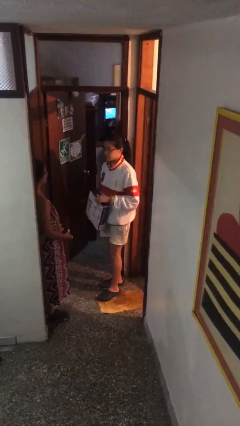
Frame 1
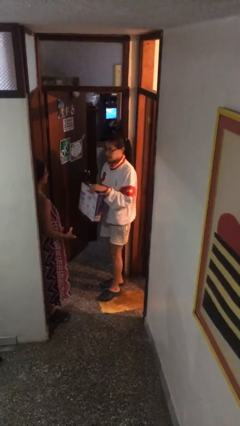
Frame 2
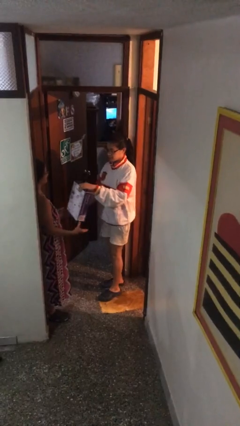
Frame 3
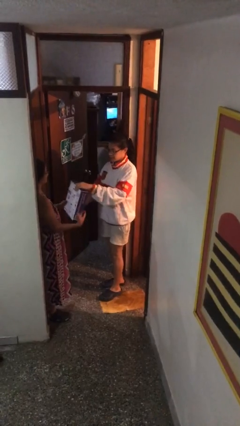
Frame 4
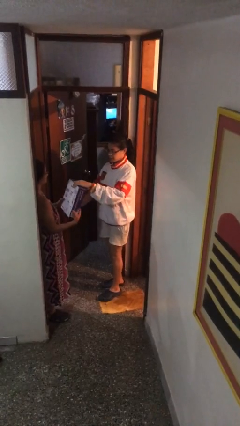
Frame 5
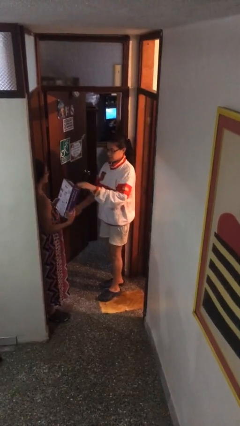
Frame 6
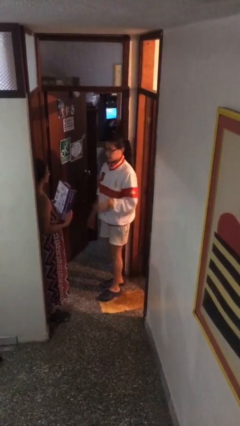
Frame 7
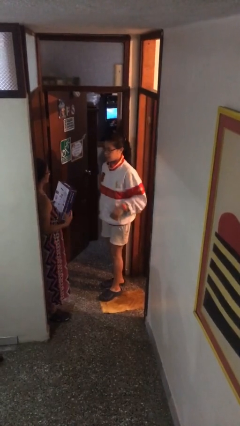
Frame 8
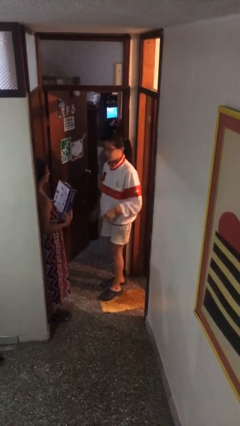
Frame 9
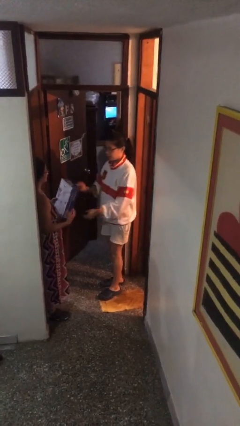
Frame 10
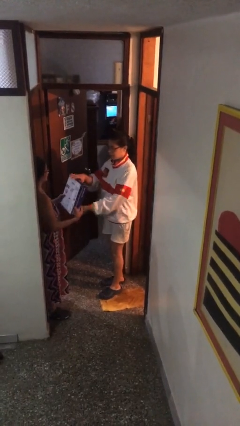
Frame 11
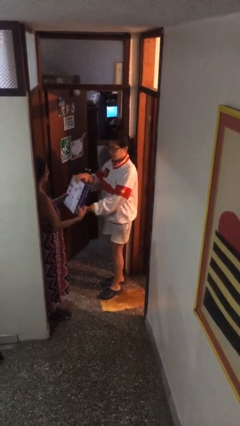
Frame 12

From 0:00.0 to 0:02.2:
person transfers object to person

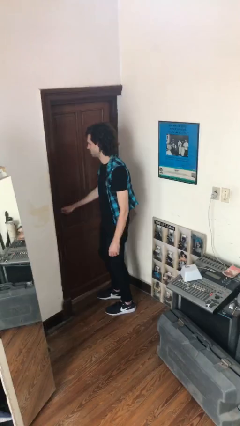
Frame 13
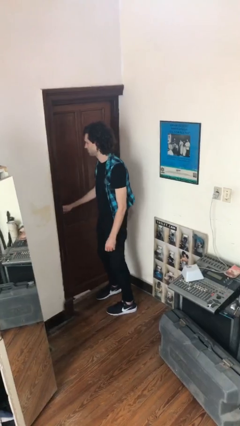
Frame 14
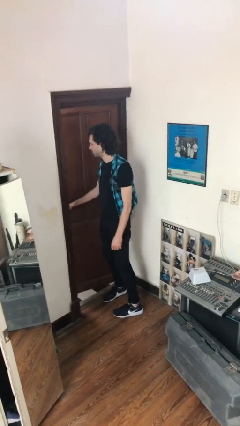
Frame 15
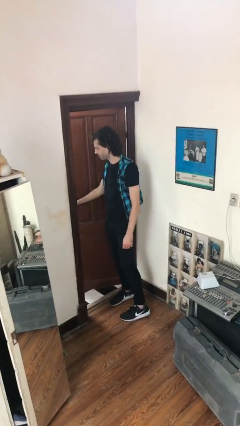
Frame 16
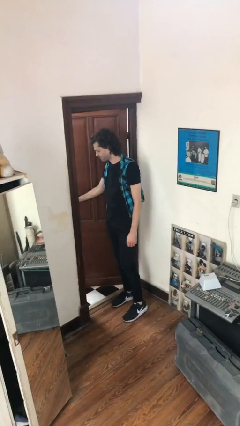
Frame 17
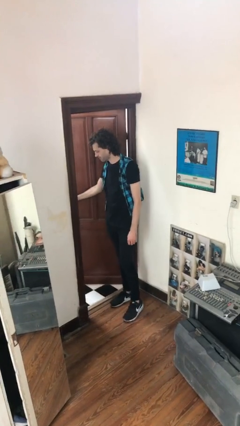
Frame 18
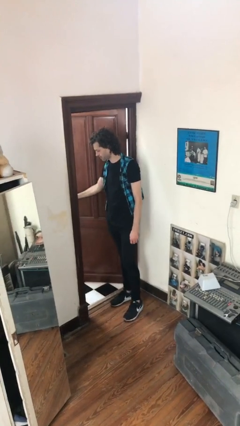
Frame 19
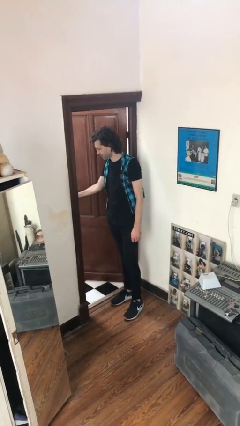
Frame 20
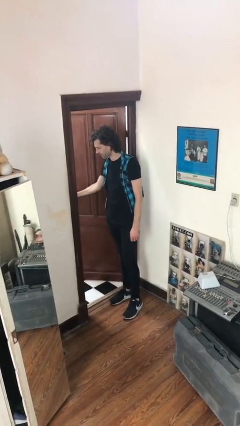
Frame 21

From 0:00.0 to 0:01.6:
person opens facility door

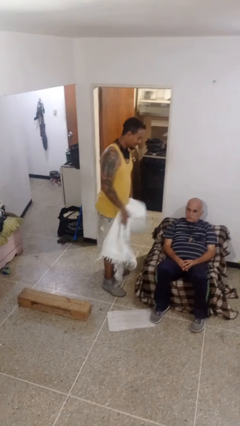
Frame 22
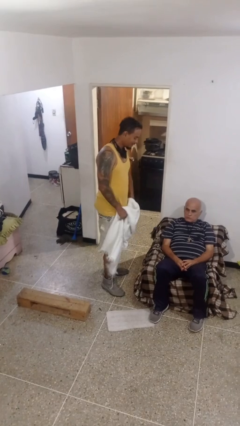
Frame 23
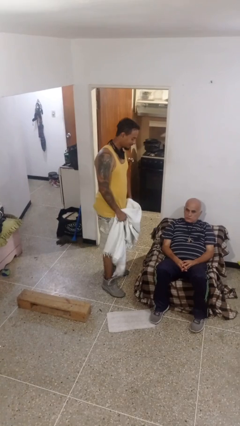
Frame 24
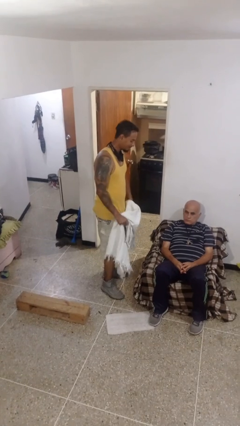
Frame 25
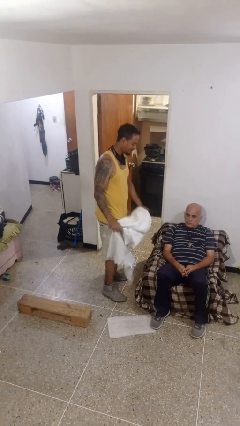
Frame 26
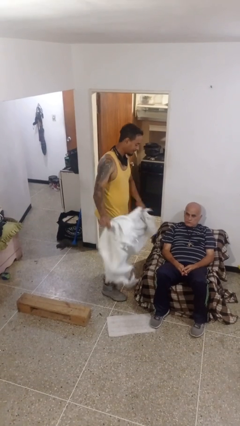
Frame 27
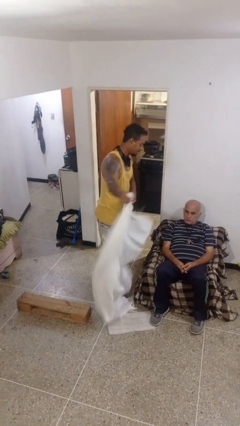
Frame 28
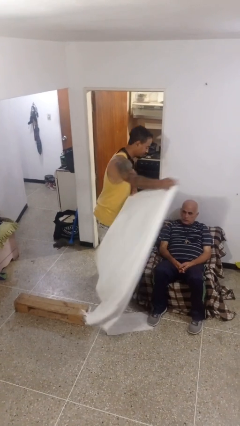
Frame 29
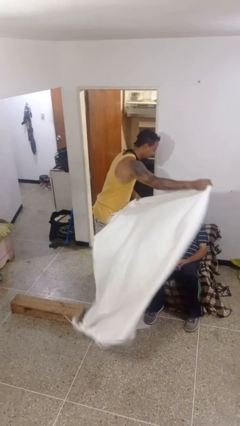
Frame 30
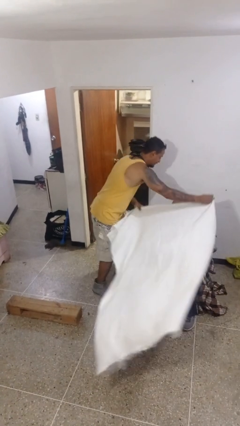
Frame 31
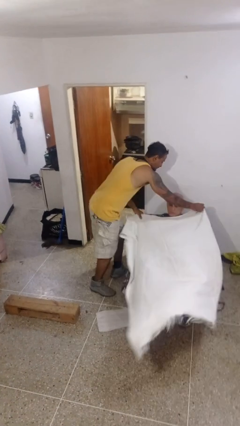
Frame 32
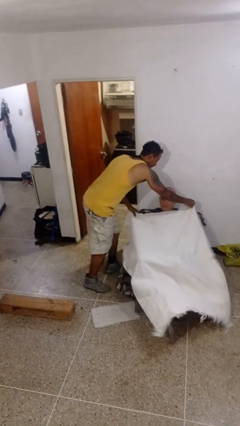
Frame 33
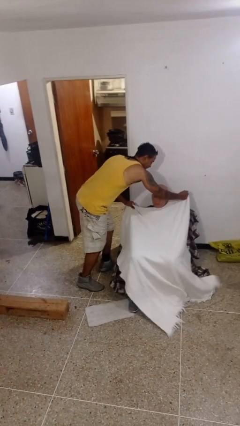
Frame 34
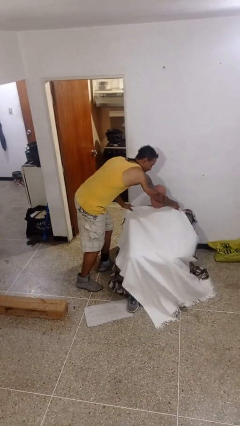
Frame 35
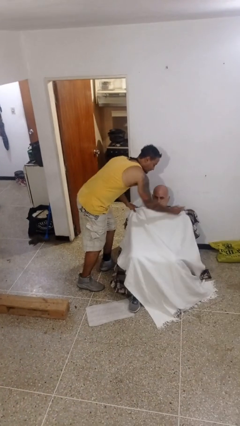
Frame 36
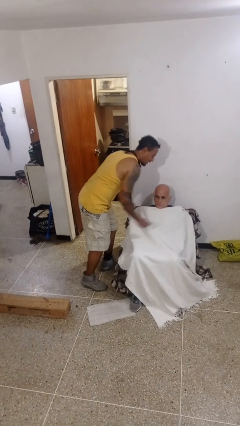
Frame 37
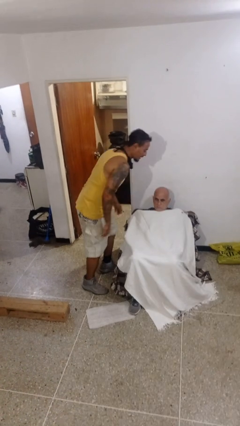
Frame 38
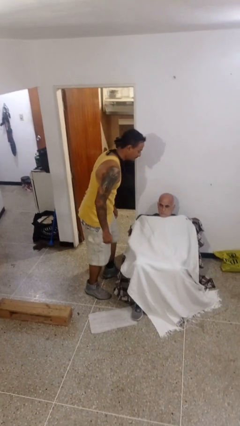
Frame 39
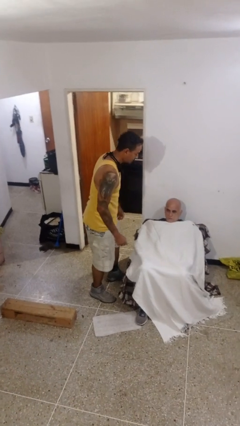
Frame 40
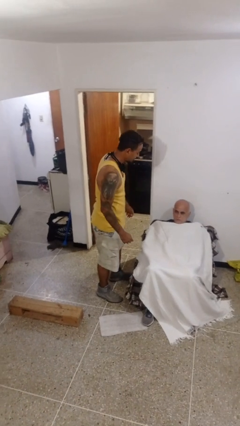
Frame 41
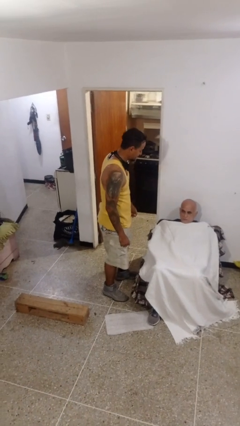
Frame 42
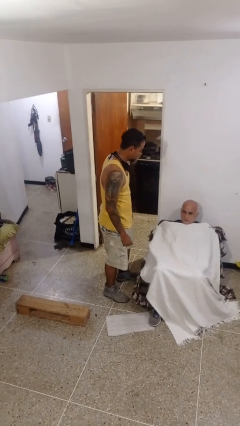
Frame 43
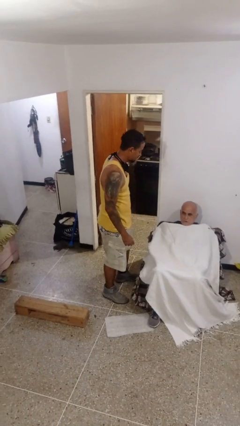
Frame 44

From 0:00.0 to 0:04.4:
person covers friend with blanket

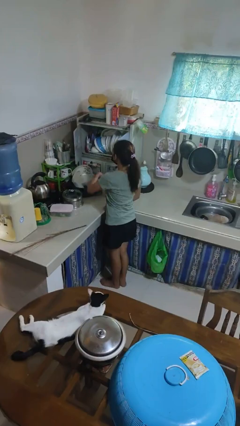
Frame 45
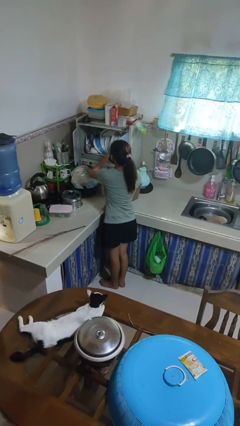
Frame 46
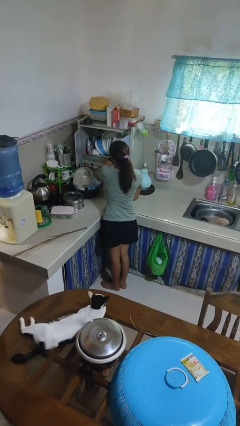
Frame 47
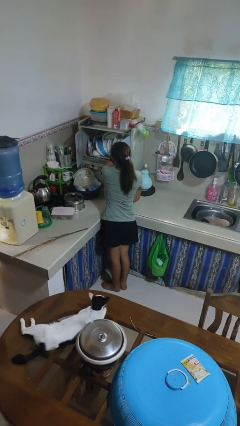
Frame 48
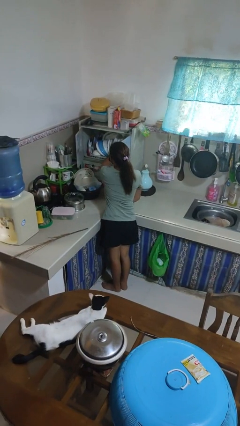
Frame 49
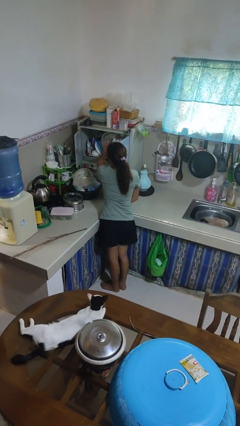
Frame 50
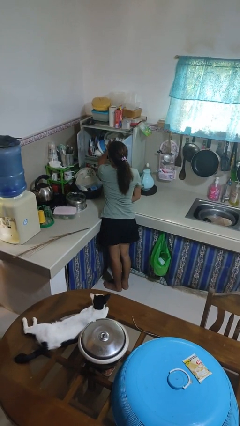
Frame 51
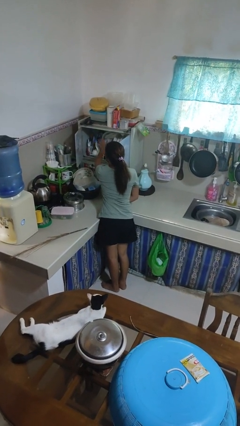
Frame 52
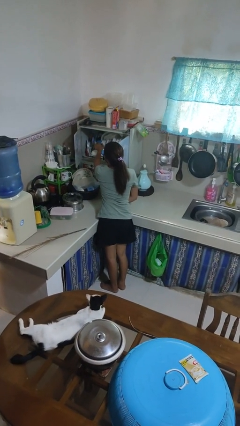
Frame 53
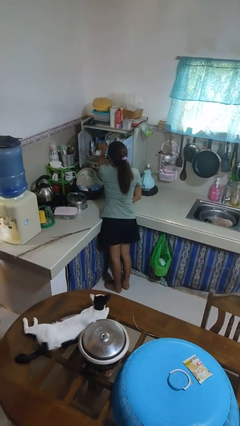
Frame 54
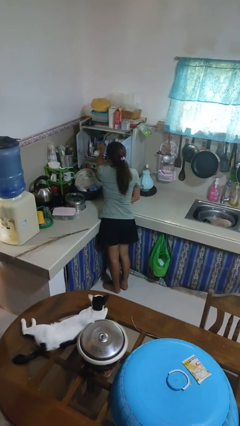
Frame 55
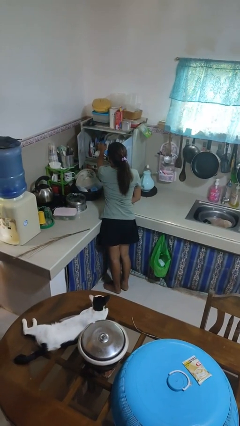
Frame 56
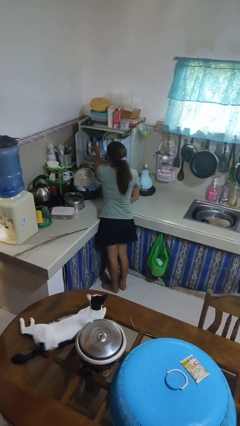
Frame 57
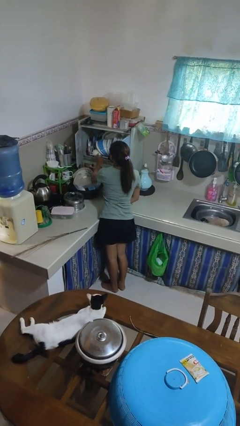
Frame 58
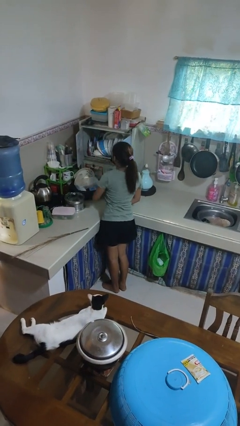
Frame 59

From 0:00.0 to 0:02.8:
person searches in kitchen drawer

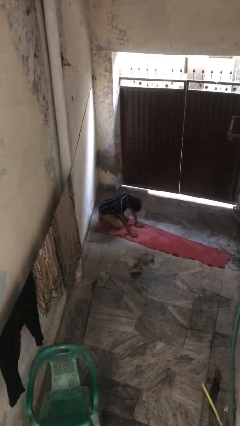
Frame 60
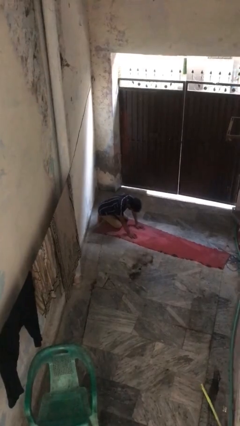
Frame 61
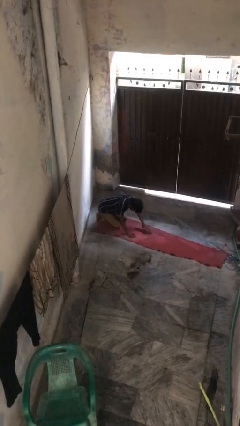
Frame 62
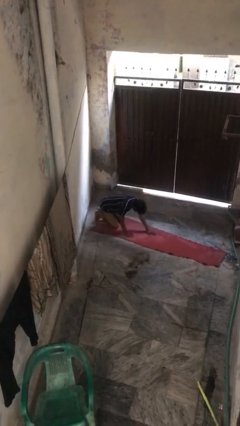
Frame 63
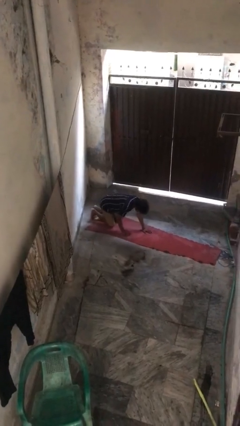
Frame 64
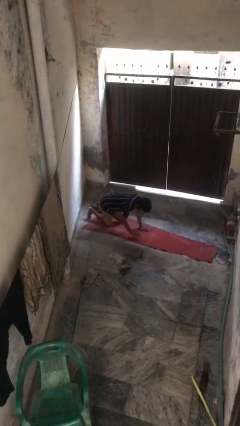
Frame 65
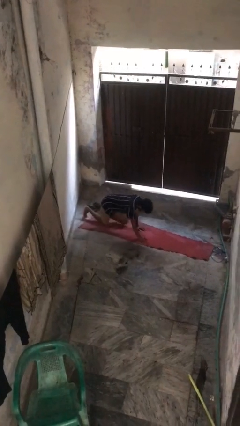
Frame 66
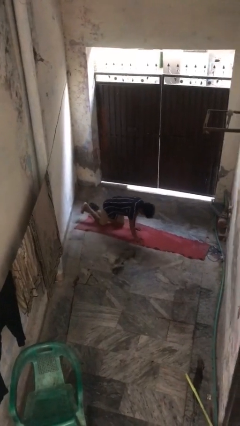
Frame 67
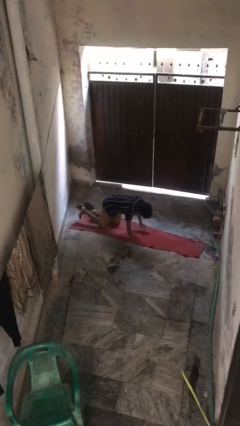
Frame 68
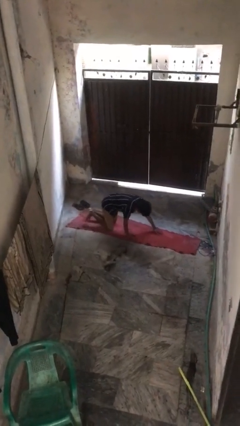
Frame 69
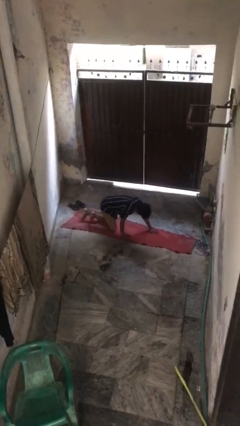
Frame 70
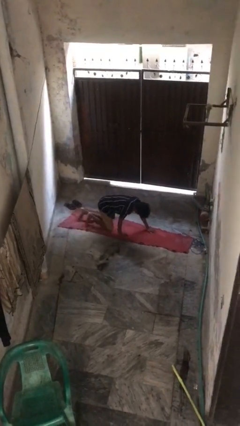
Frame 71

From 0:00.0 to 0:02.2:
person crawls

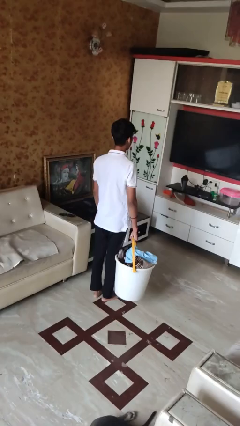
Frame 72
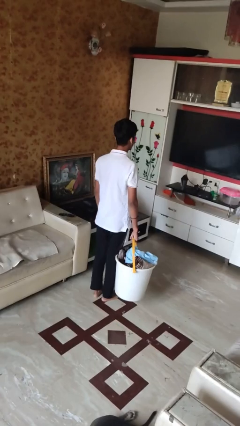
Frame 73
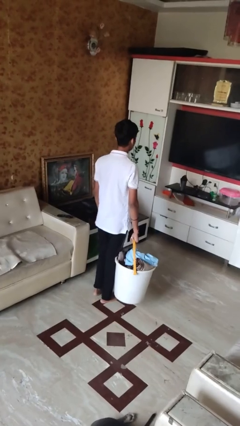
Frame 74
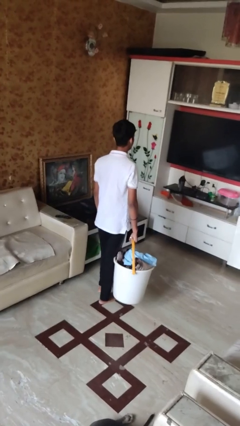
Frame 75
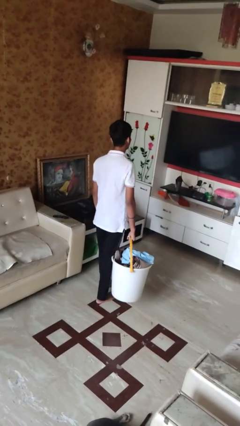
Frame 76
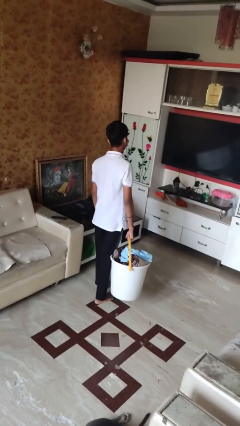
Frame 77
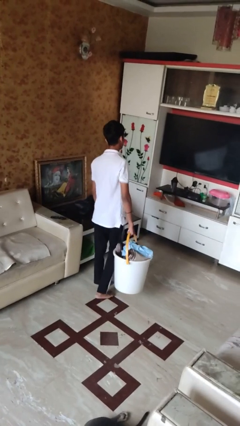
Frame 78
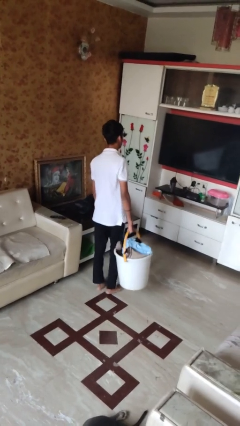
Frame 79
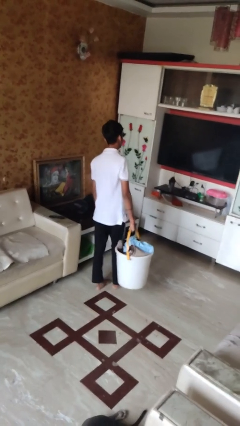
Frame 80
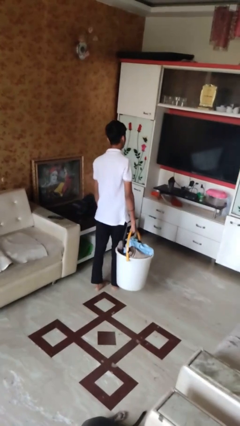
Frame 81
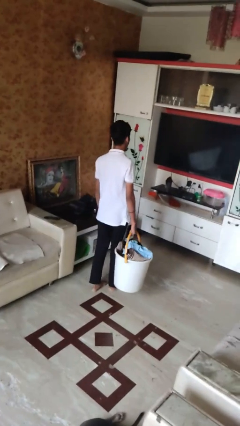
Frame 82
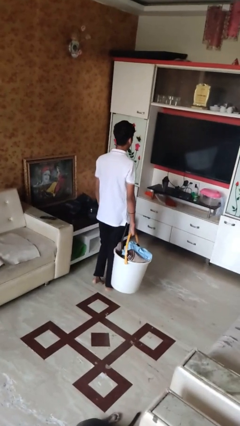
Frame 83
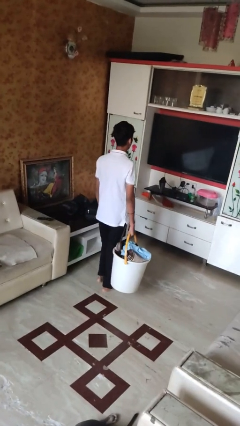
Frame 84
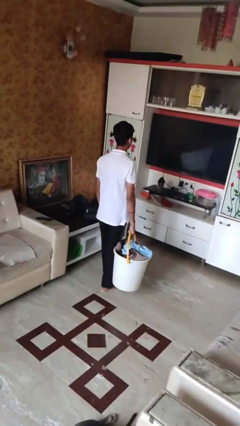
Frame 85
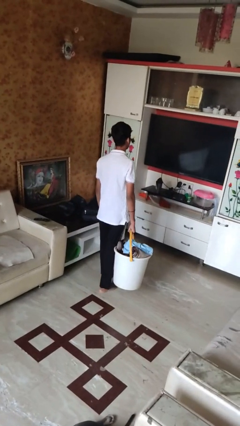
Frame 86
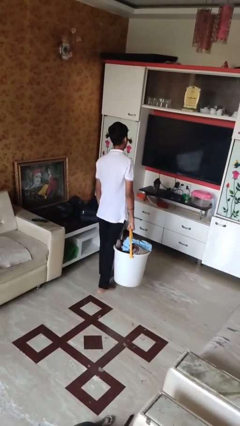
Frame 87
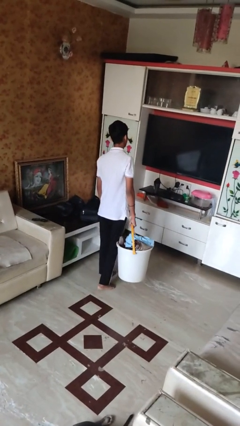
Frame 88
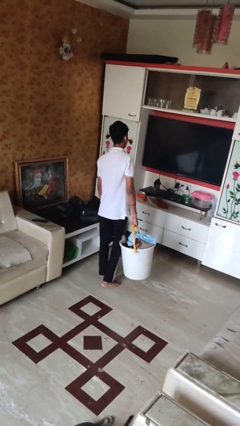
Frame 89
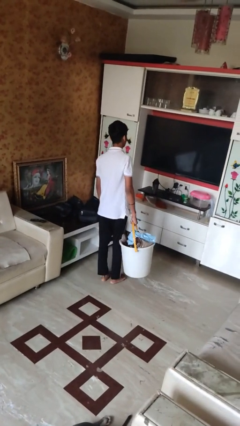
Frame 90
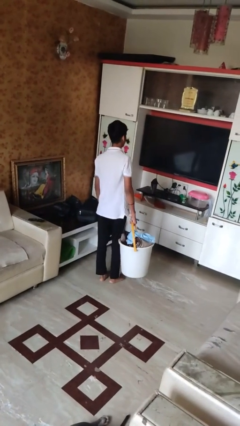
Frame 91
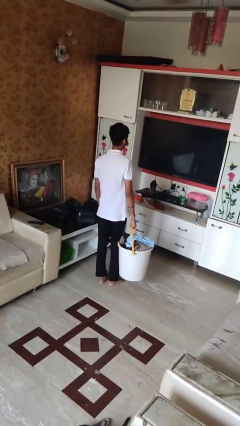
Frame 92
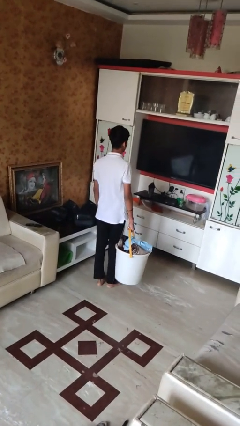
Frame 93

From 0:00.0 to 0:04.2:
person carries laundry basket

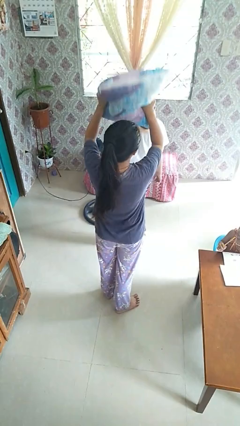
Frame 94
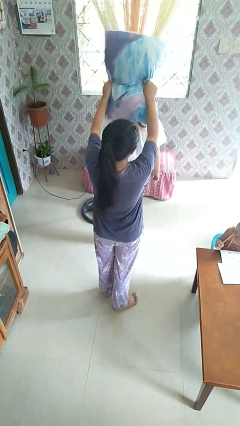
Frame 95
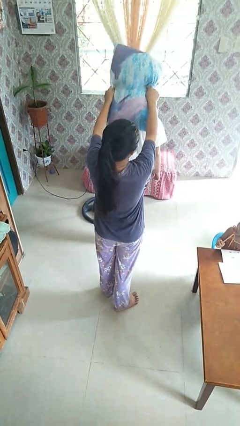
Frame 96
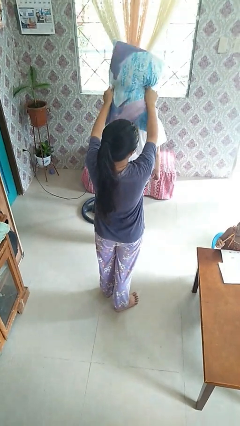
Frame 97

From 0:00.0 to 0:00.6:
person hits person with pillow
